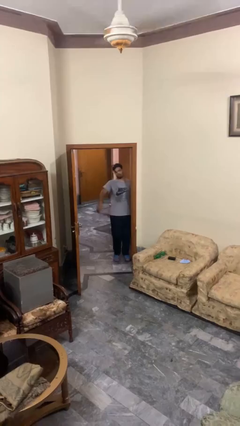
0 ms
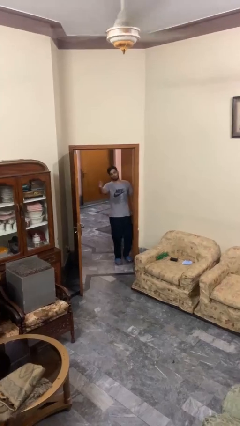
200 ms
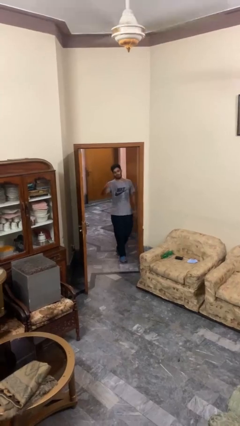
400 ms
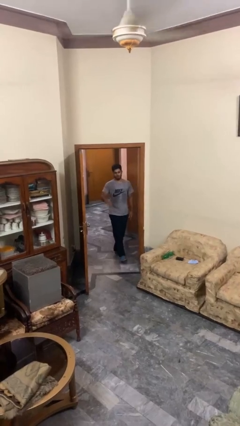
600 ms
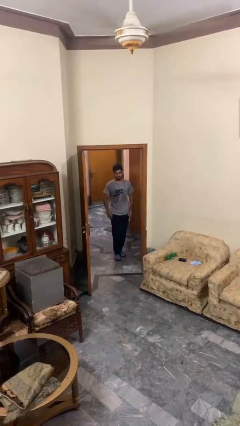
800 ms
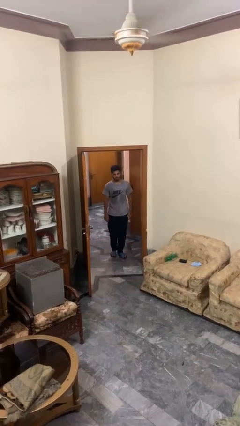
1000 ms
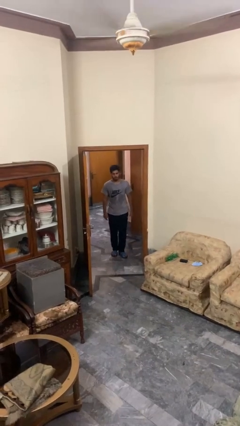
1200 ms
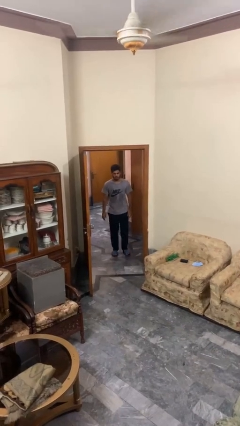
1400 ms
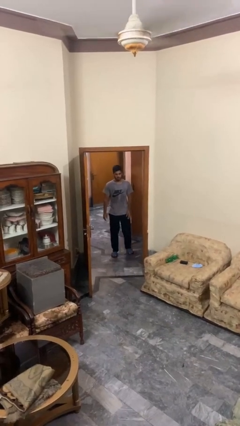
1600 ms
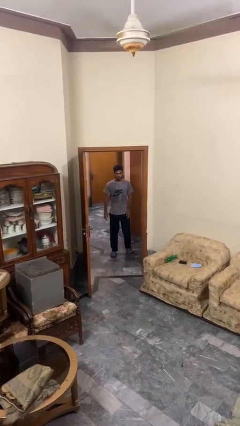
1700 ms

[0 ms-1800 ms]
person bumps into wall

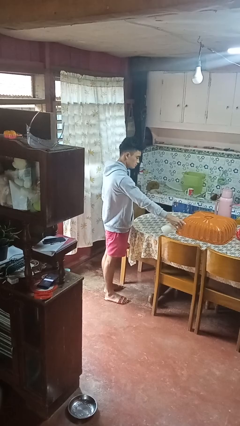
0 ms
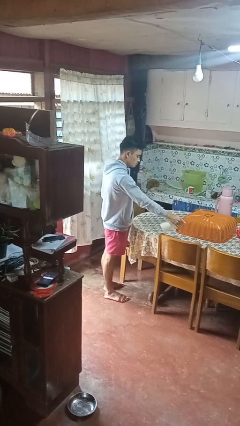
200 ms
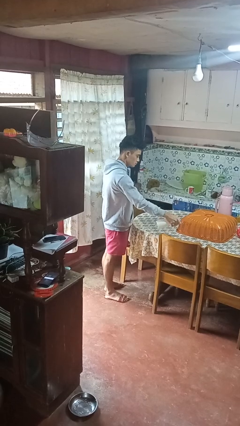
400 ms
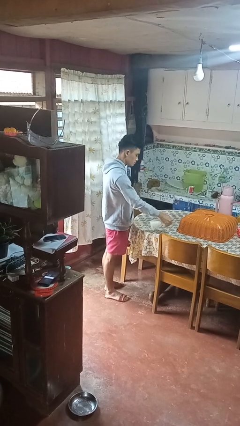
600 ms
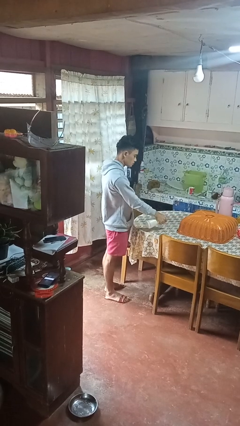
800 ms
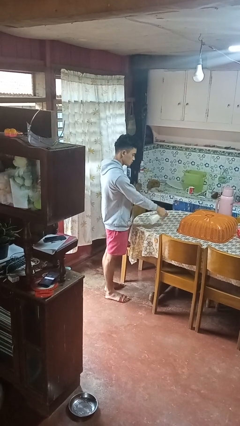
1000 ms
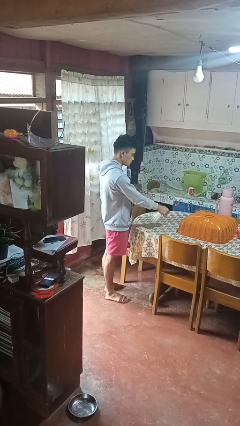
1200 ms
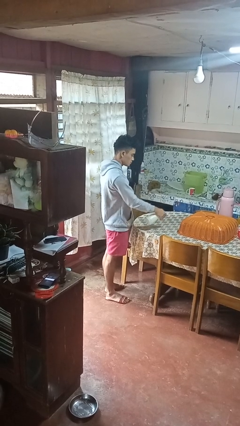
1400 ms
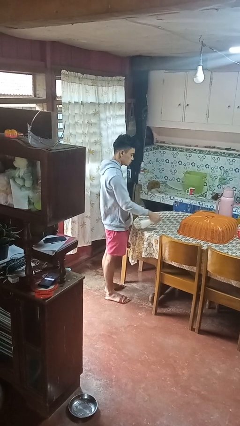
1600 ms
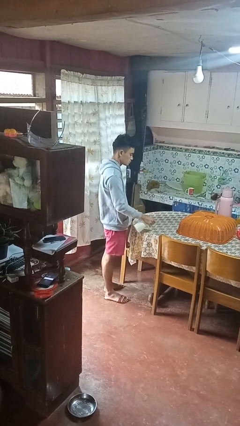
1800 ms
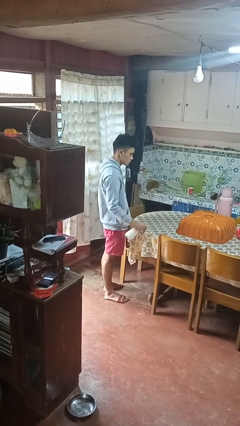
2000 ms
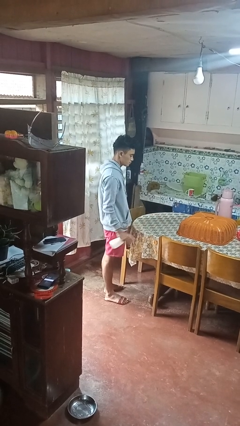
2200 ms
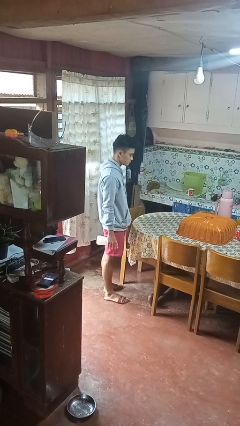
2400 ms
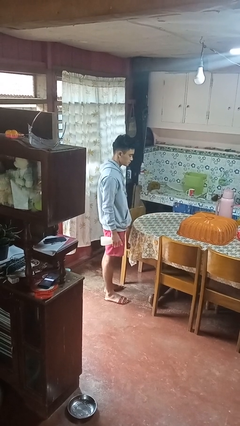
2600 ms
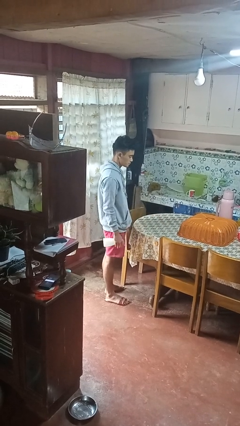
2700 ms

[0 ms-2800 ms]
person sprays from bottle

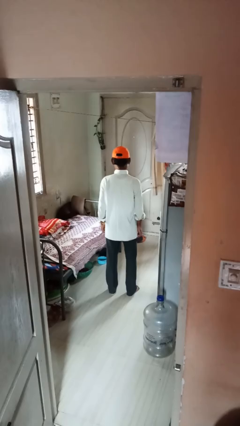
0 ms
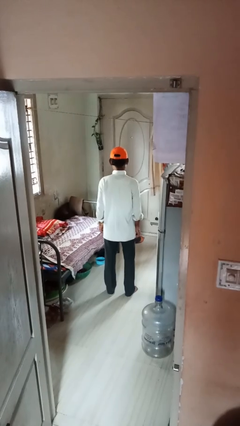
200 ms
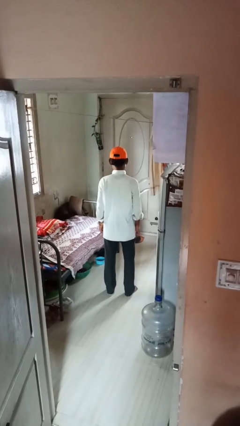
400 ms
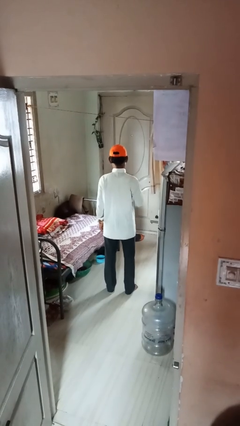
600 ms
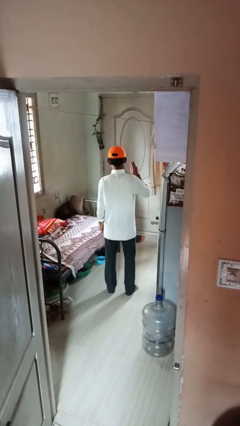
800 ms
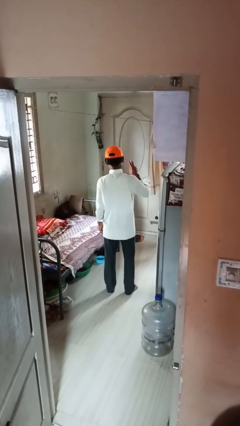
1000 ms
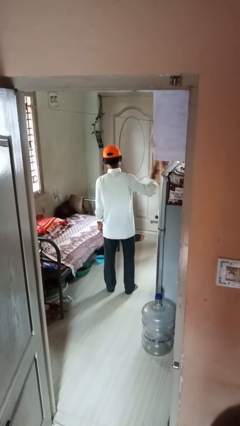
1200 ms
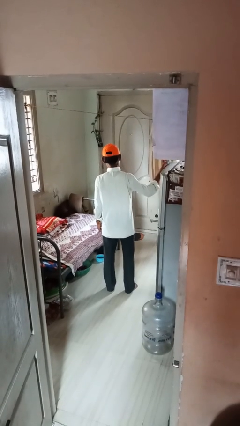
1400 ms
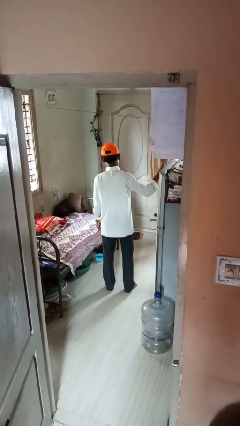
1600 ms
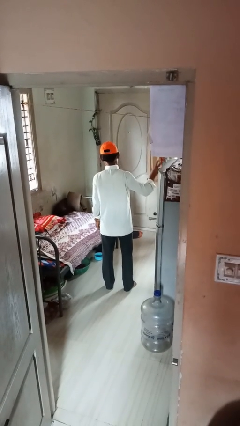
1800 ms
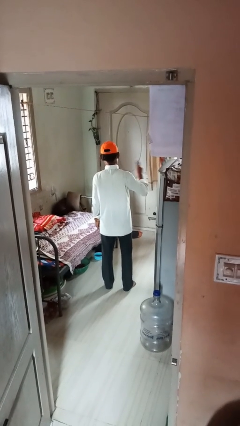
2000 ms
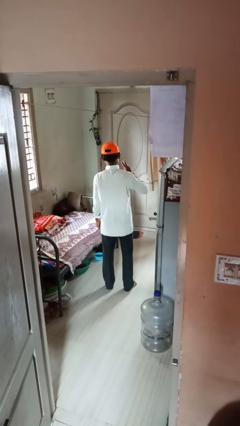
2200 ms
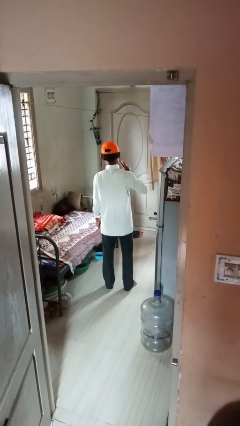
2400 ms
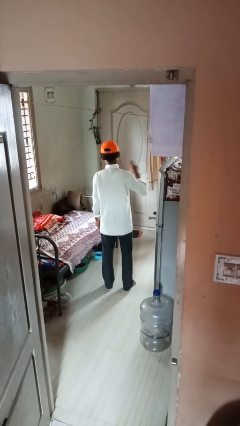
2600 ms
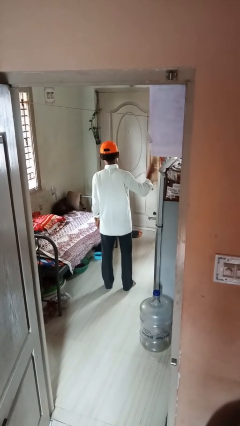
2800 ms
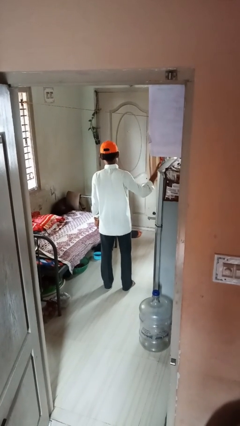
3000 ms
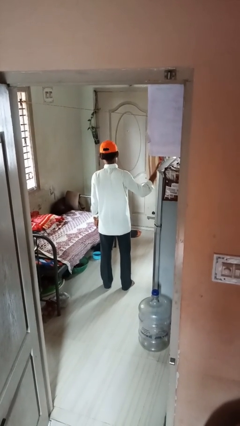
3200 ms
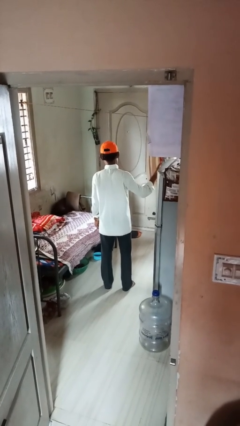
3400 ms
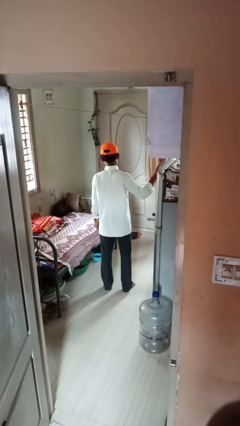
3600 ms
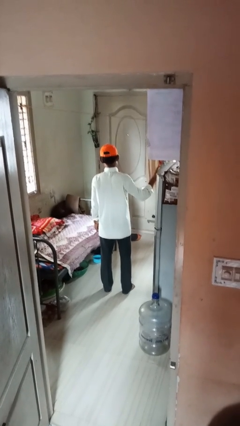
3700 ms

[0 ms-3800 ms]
person gestures swipe right

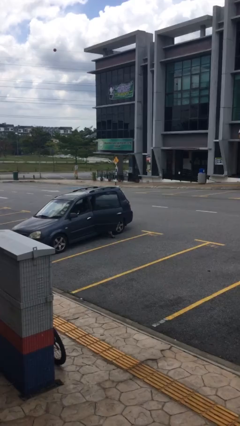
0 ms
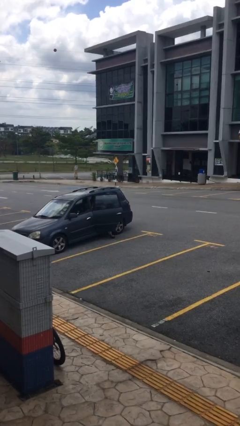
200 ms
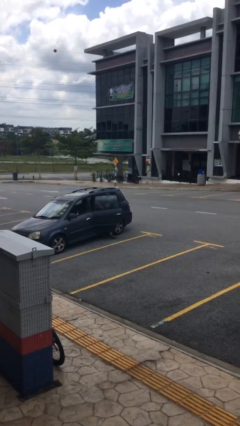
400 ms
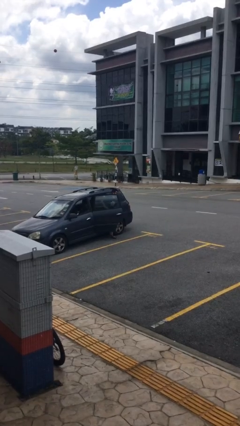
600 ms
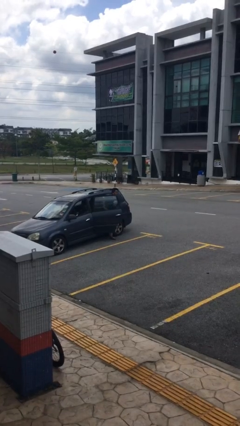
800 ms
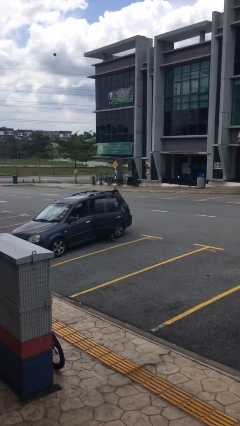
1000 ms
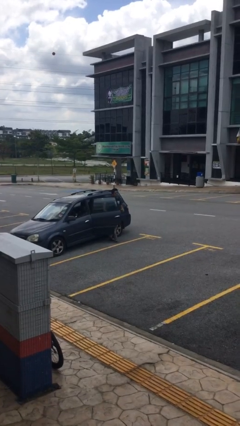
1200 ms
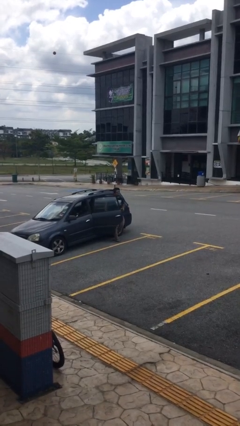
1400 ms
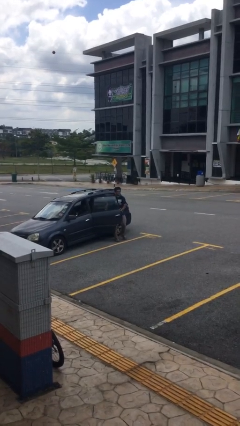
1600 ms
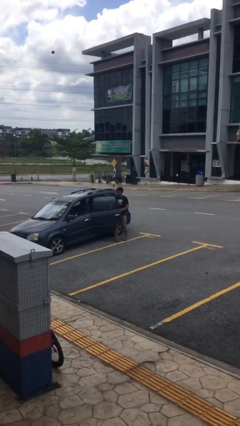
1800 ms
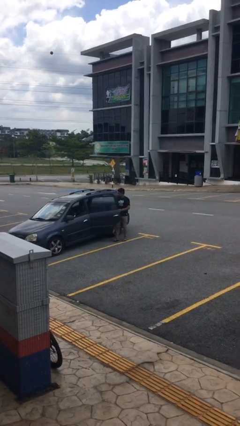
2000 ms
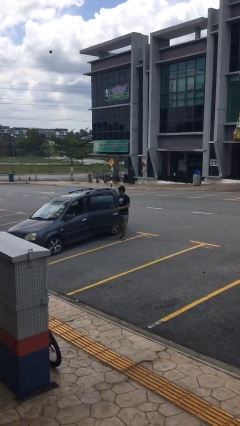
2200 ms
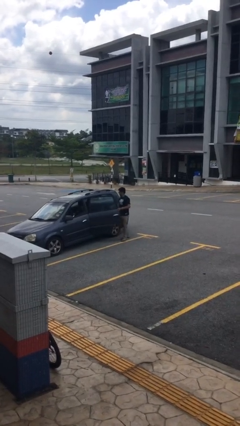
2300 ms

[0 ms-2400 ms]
person exits car

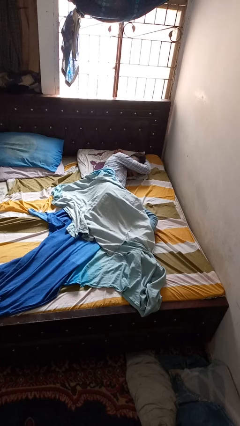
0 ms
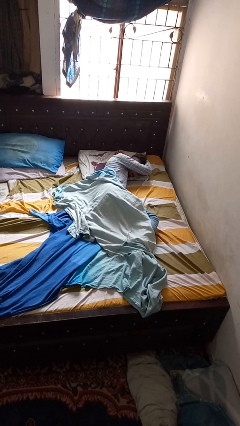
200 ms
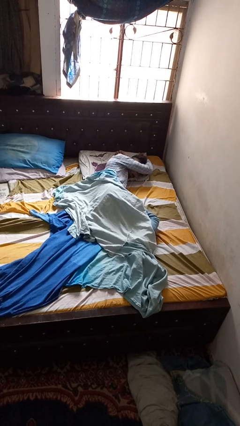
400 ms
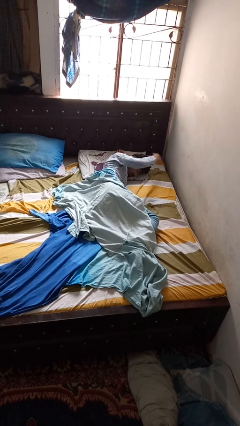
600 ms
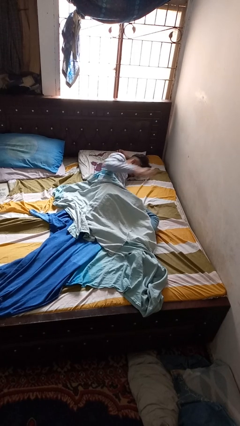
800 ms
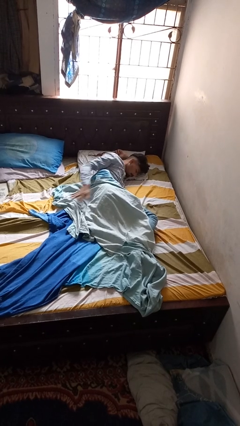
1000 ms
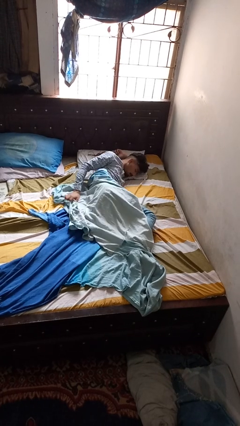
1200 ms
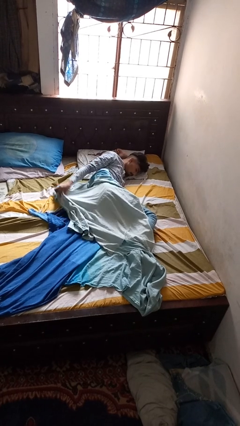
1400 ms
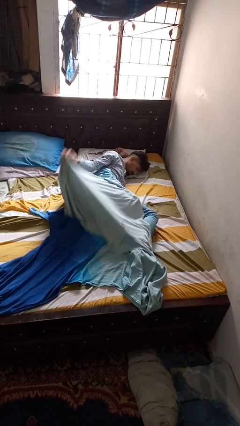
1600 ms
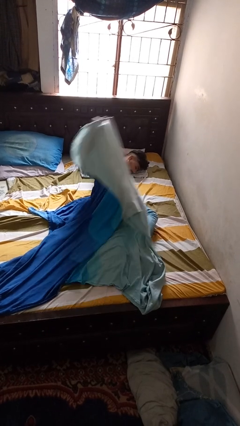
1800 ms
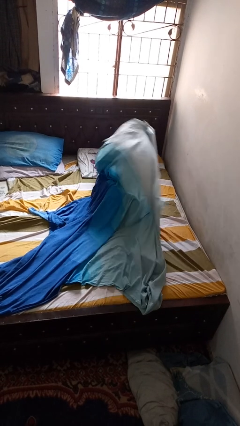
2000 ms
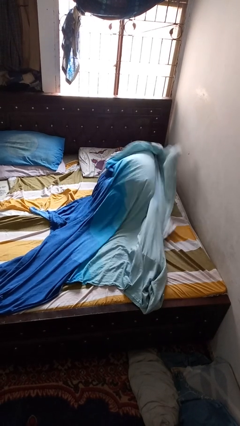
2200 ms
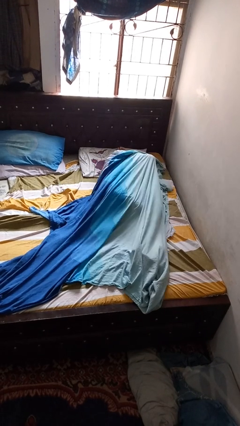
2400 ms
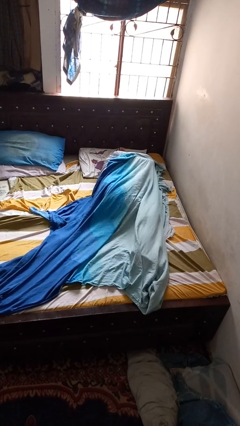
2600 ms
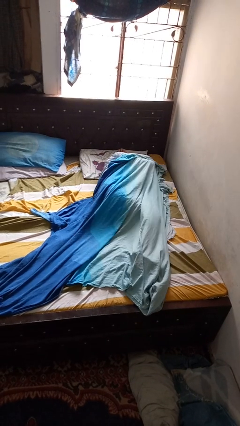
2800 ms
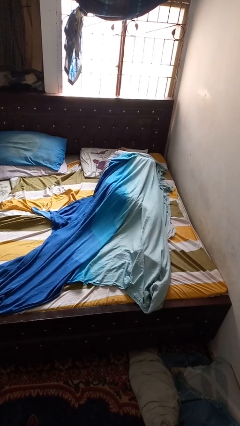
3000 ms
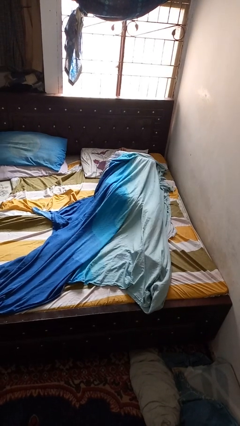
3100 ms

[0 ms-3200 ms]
person covers with blanket

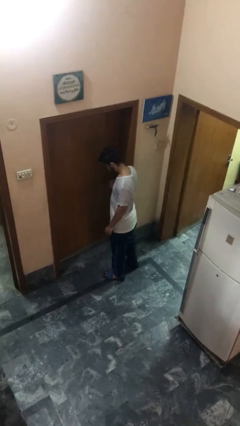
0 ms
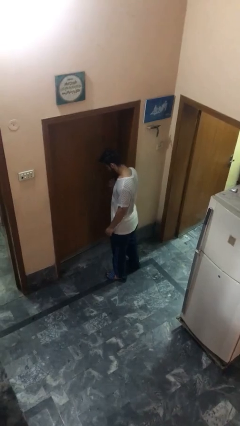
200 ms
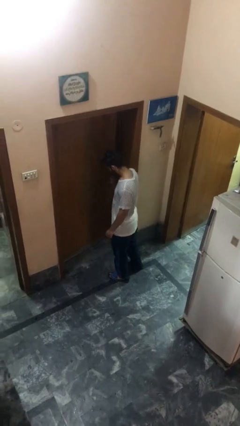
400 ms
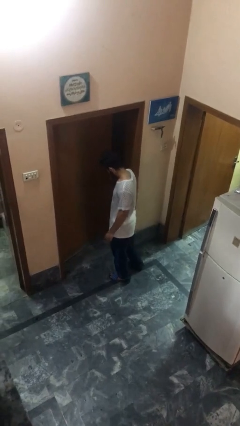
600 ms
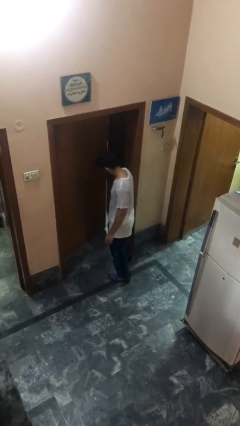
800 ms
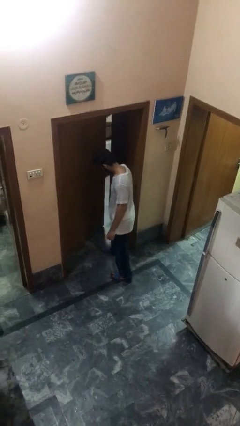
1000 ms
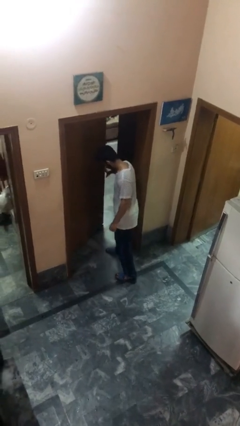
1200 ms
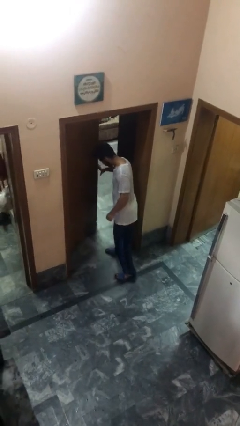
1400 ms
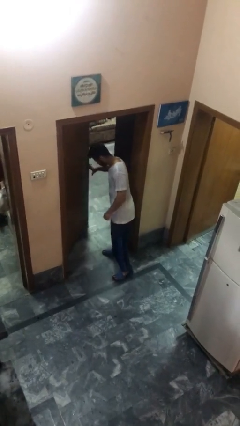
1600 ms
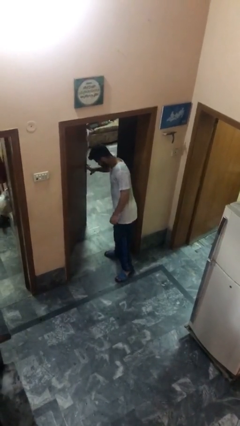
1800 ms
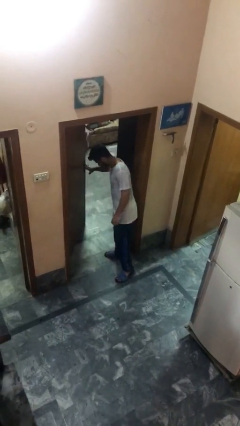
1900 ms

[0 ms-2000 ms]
person opens facility door

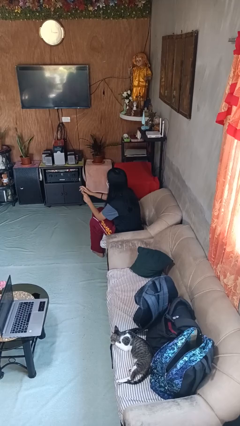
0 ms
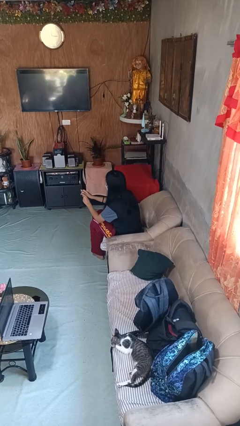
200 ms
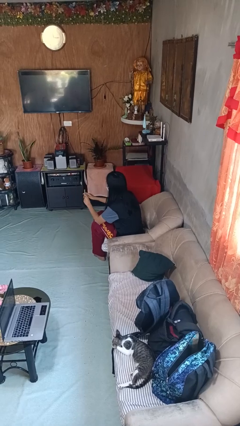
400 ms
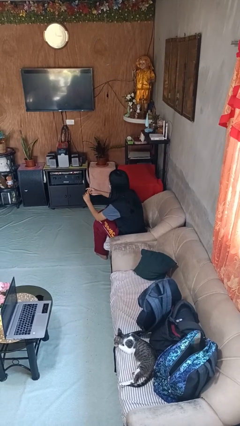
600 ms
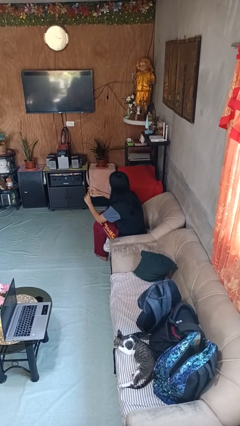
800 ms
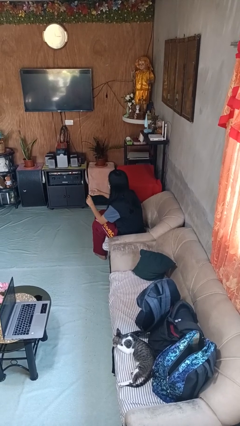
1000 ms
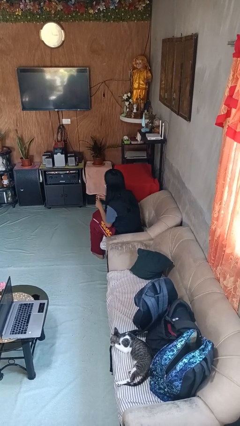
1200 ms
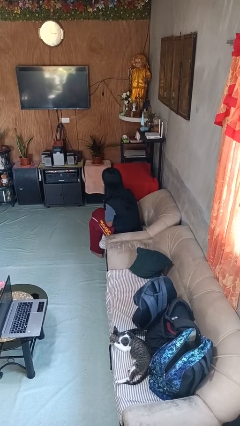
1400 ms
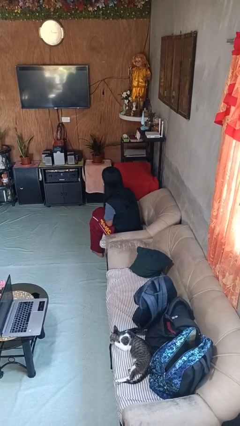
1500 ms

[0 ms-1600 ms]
person files fingernails
